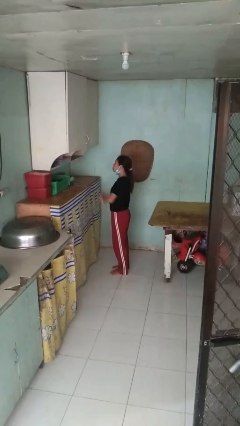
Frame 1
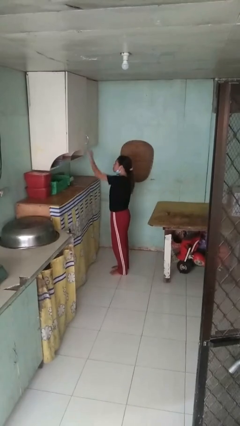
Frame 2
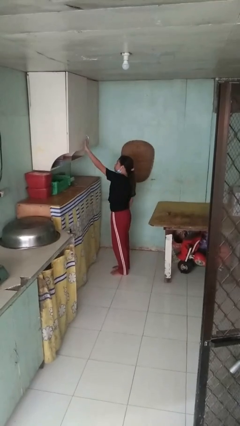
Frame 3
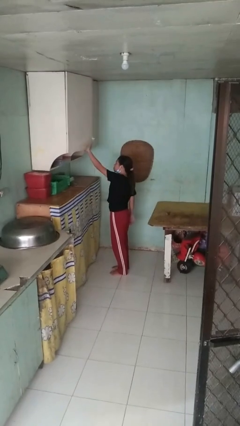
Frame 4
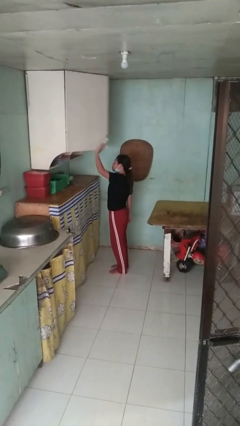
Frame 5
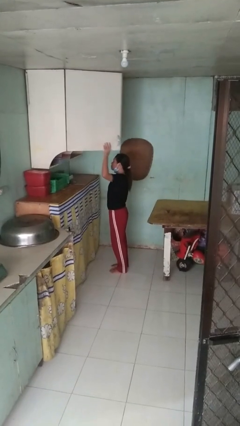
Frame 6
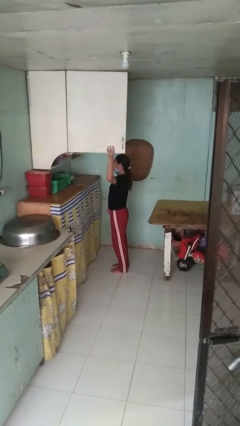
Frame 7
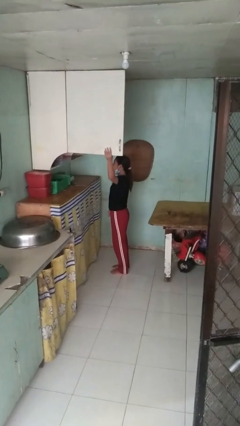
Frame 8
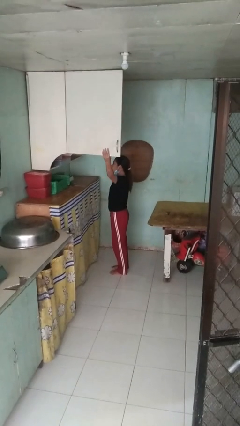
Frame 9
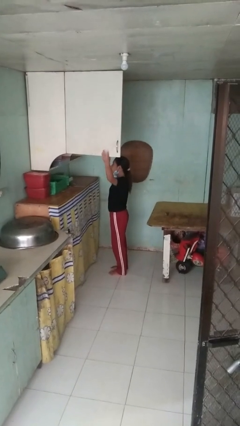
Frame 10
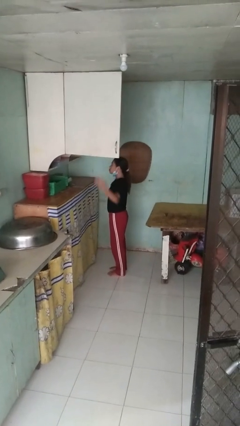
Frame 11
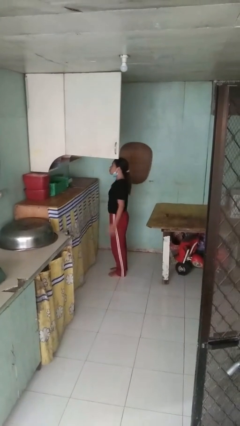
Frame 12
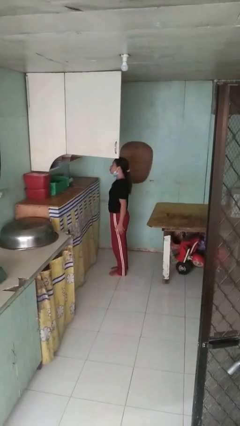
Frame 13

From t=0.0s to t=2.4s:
person opens cabinet

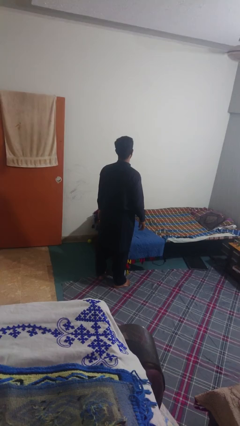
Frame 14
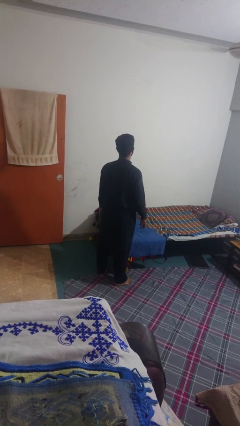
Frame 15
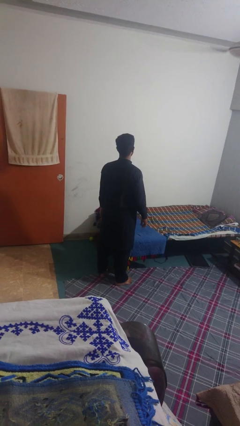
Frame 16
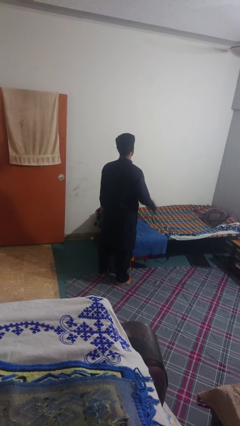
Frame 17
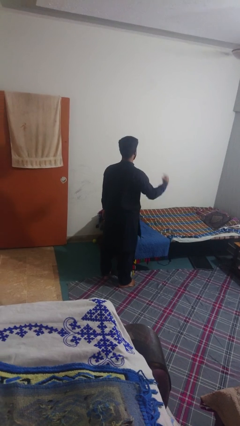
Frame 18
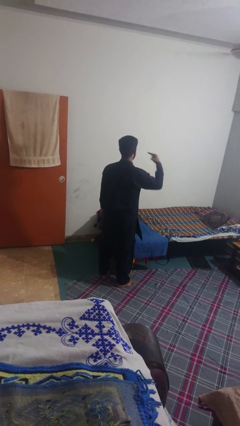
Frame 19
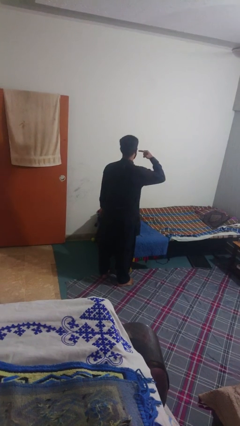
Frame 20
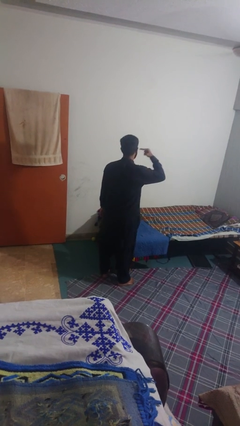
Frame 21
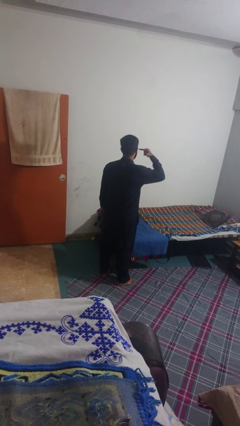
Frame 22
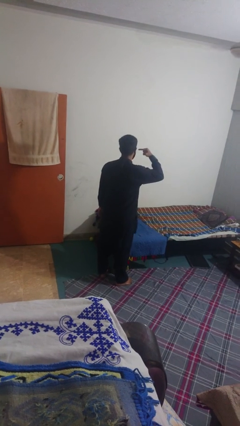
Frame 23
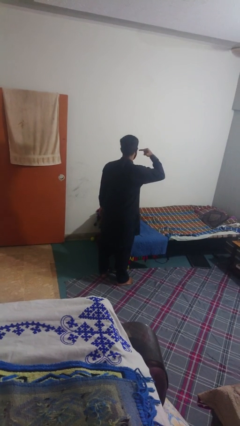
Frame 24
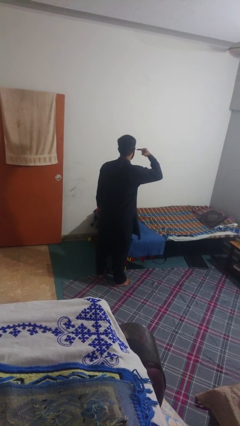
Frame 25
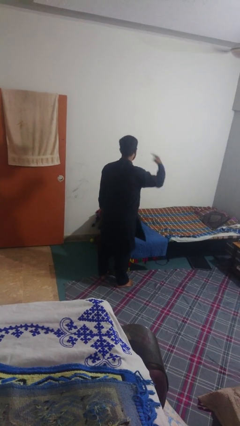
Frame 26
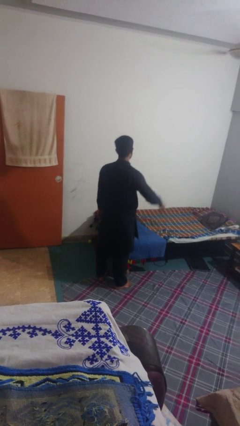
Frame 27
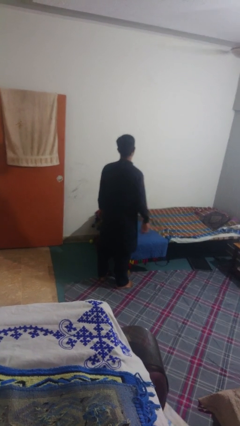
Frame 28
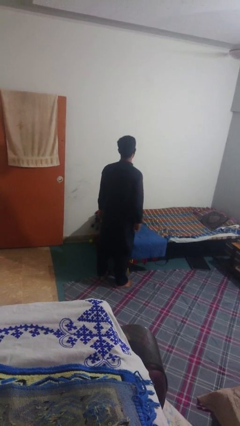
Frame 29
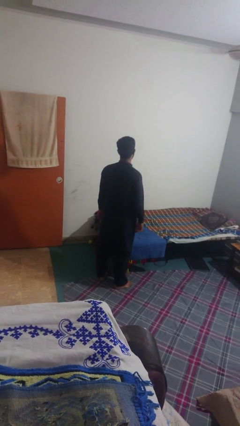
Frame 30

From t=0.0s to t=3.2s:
person gestures listen closely

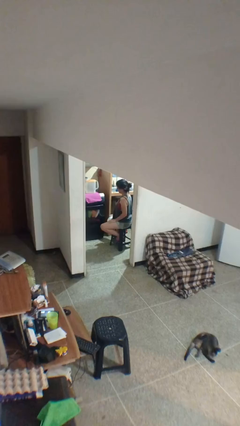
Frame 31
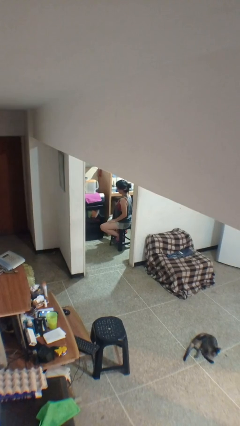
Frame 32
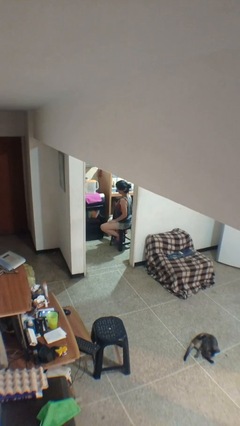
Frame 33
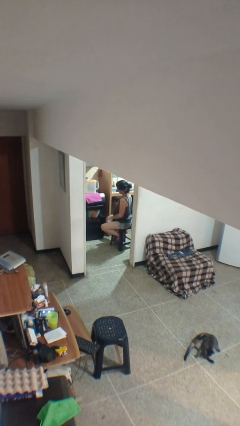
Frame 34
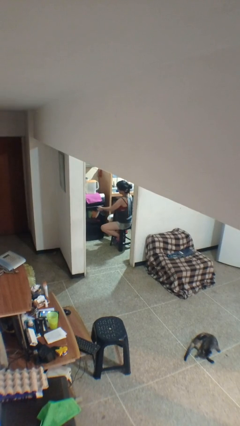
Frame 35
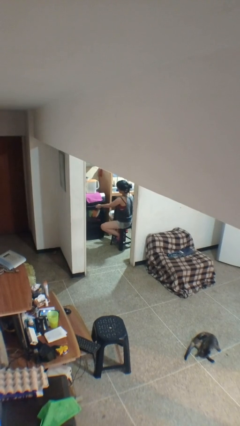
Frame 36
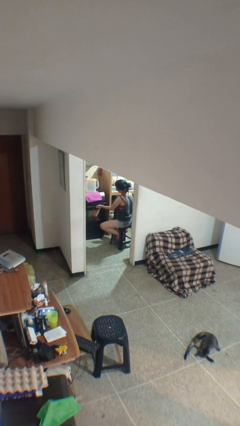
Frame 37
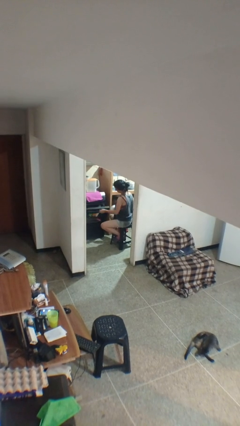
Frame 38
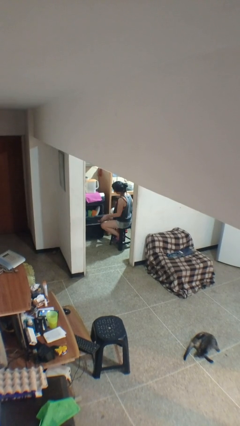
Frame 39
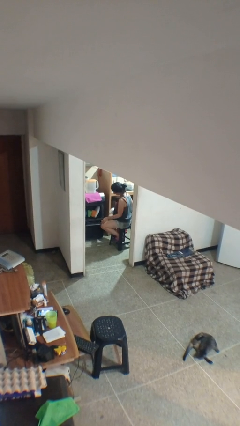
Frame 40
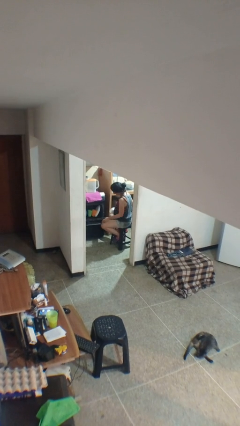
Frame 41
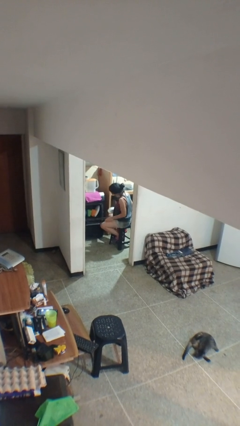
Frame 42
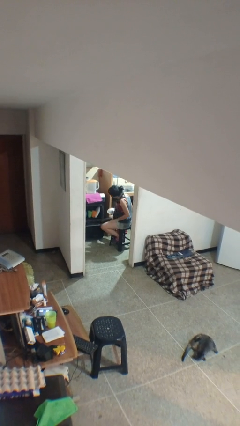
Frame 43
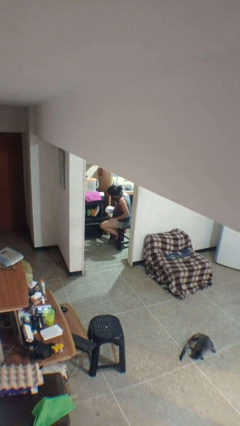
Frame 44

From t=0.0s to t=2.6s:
person opens dishwasher

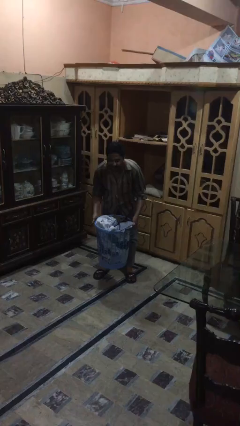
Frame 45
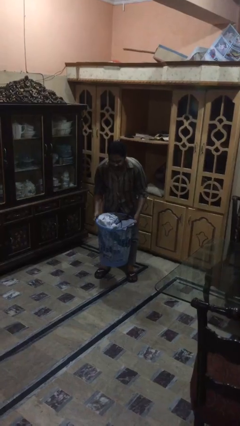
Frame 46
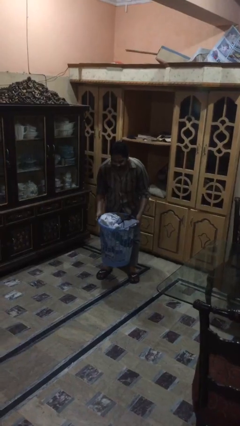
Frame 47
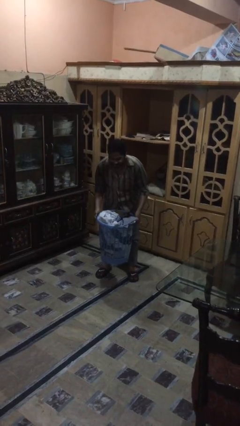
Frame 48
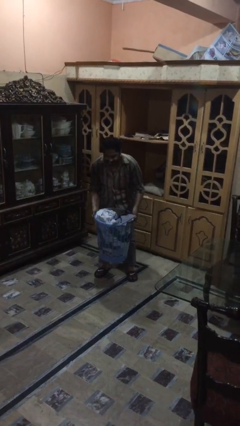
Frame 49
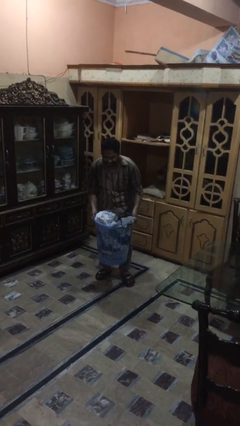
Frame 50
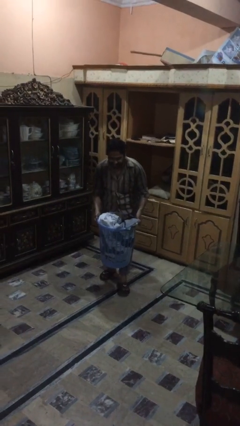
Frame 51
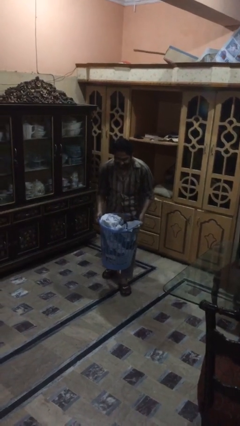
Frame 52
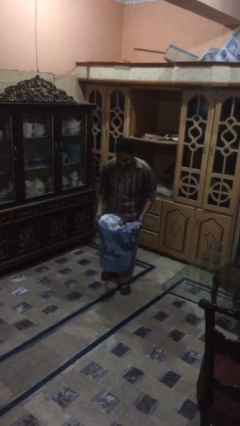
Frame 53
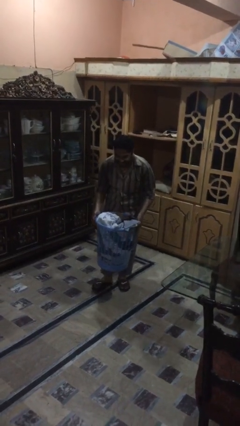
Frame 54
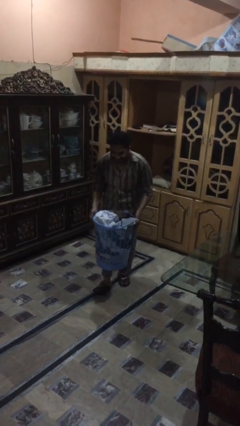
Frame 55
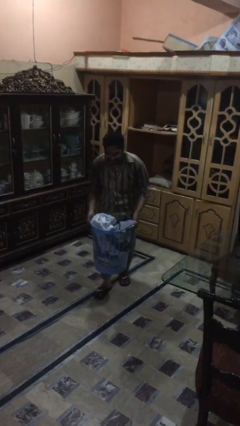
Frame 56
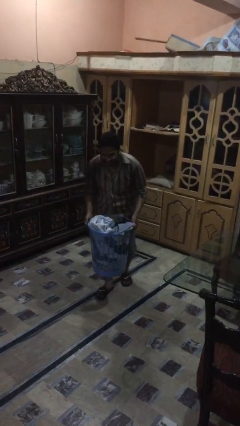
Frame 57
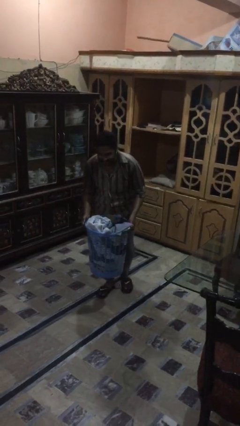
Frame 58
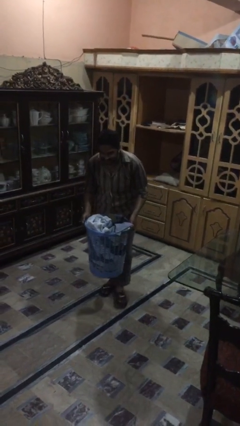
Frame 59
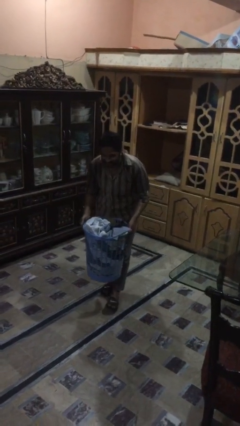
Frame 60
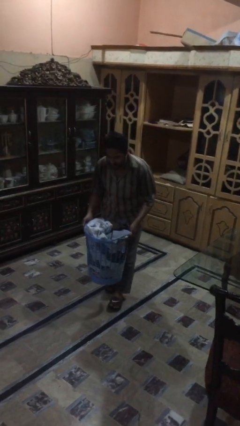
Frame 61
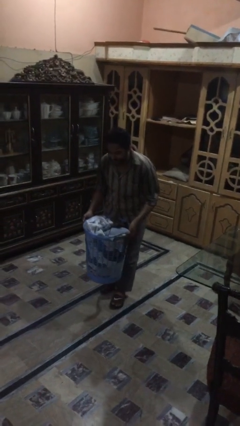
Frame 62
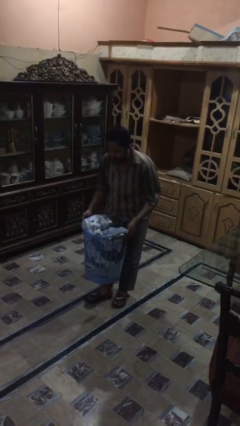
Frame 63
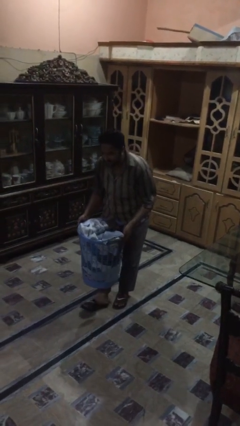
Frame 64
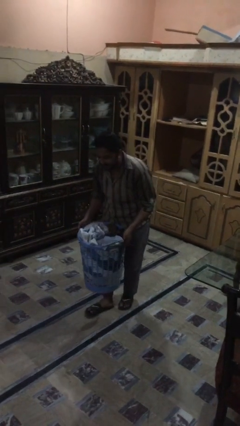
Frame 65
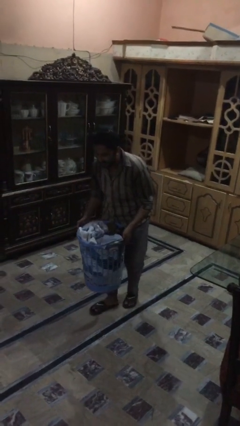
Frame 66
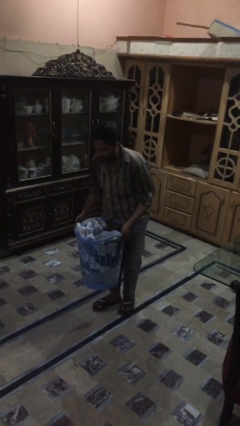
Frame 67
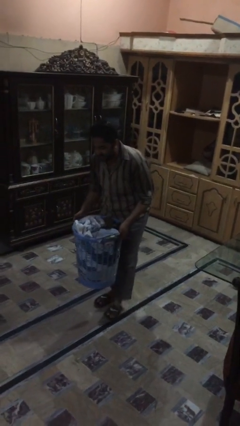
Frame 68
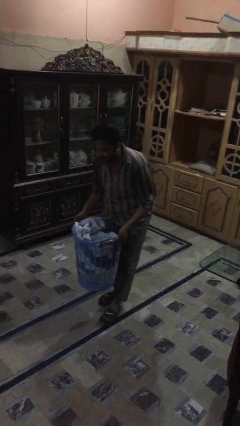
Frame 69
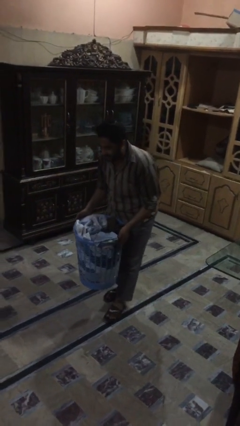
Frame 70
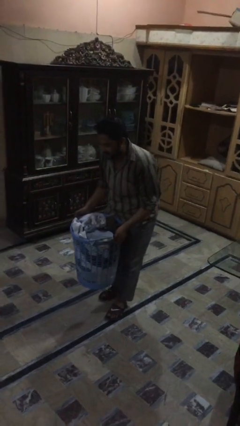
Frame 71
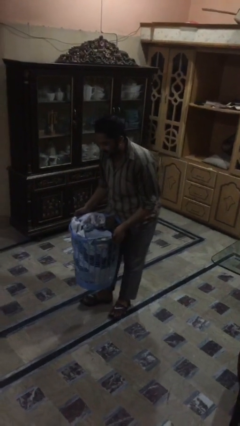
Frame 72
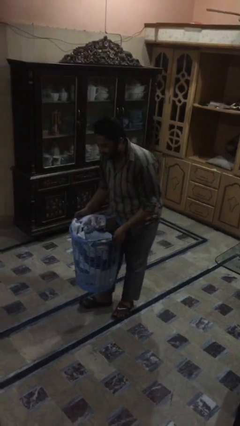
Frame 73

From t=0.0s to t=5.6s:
person carries heavy object

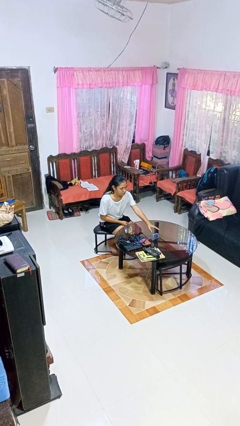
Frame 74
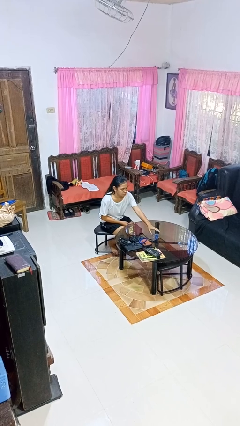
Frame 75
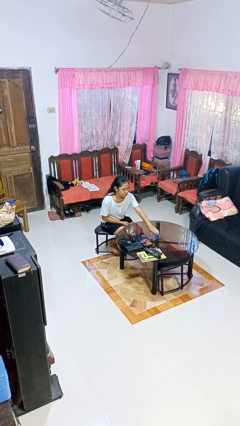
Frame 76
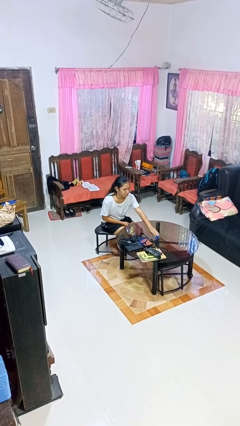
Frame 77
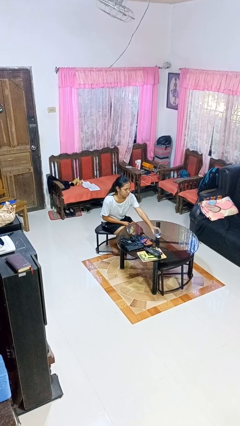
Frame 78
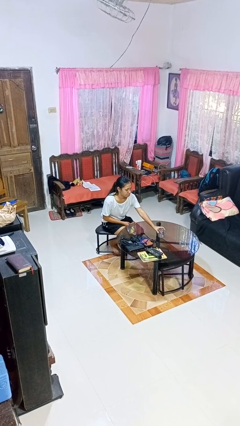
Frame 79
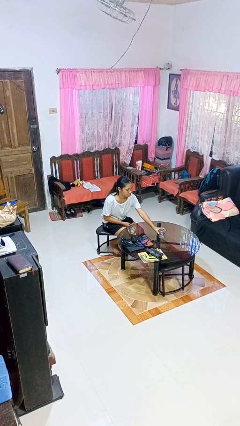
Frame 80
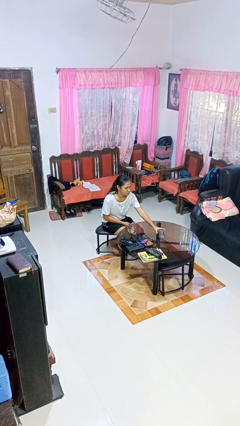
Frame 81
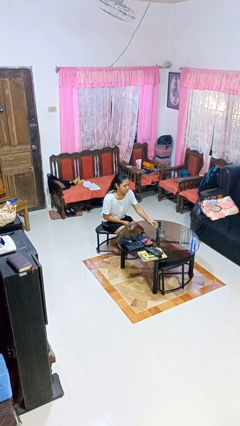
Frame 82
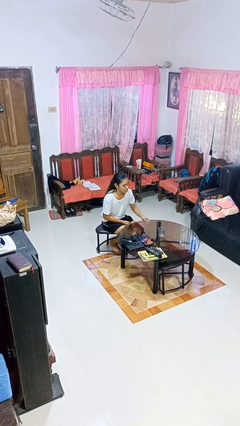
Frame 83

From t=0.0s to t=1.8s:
person sets upright glass

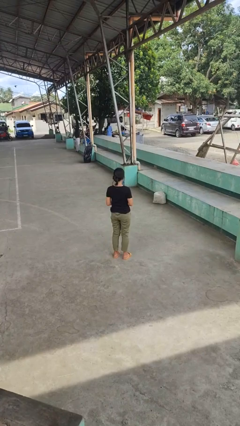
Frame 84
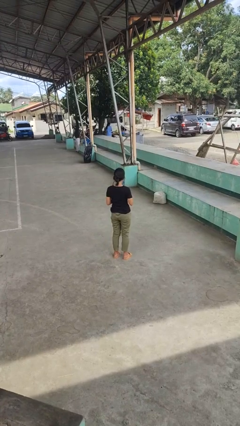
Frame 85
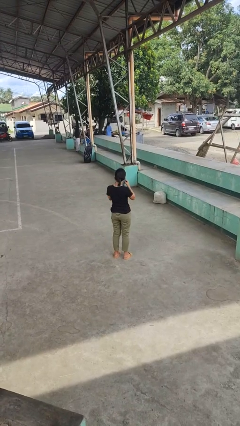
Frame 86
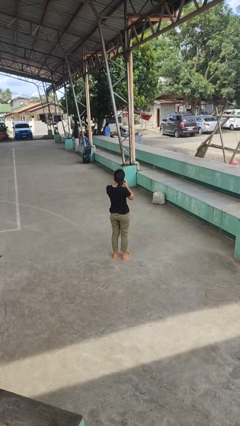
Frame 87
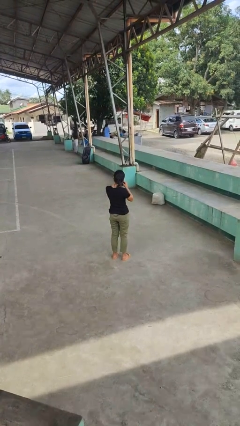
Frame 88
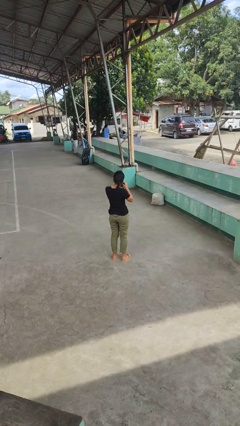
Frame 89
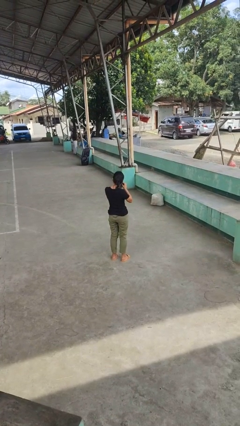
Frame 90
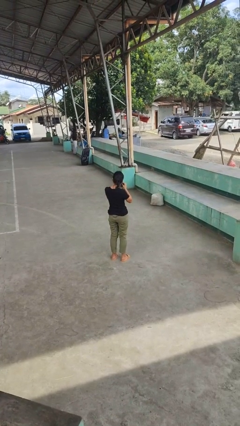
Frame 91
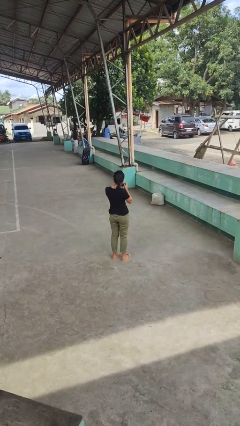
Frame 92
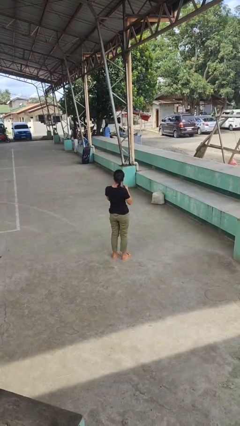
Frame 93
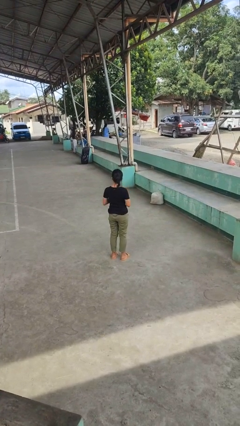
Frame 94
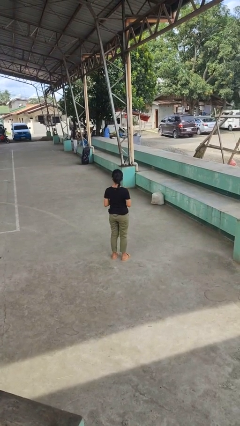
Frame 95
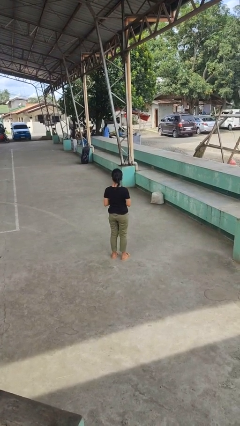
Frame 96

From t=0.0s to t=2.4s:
person takes off earrings
